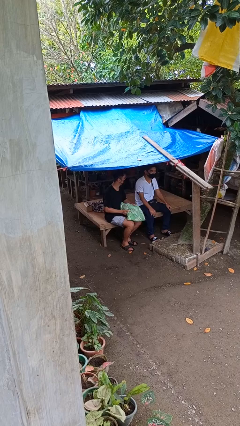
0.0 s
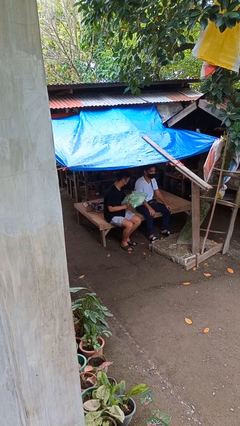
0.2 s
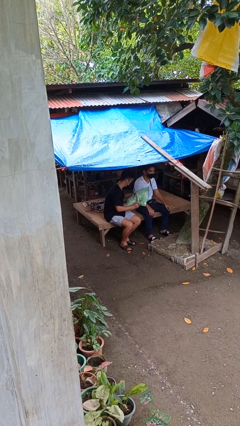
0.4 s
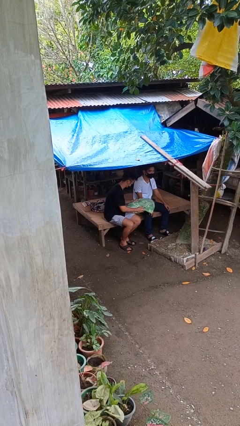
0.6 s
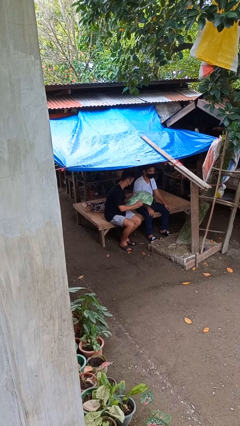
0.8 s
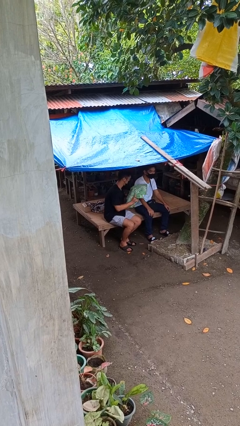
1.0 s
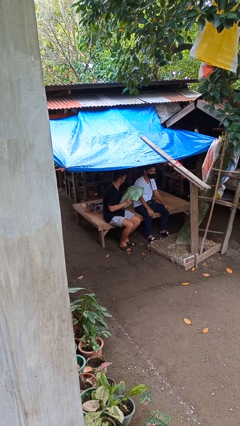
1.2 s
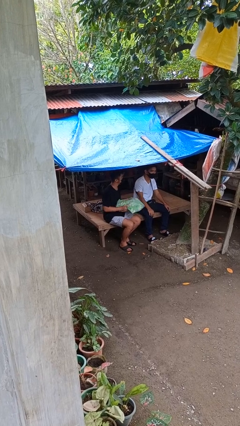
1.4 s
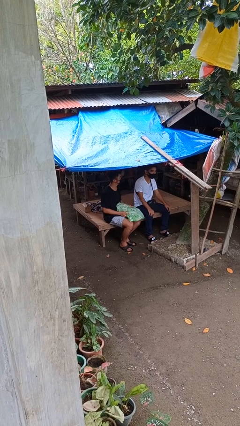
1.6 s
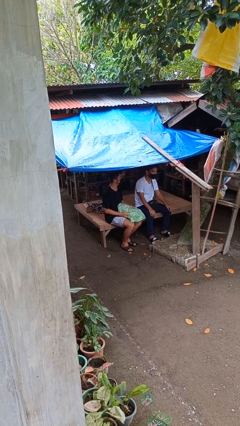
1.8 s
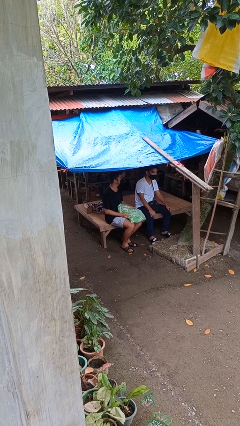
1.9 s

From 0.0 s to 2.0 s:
person hits person with pillow

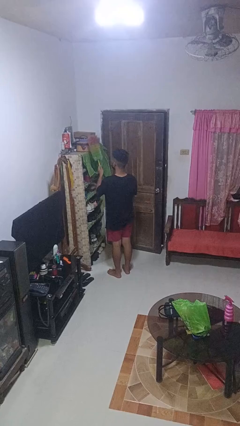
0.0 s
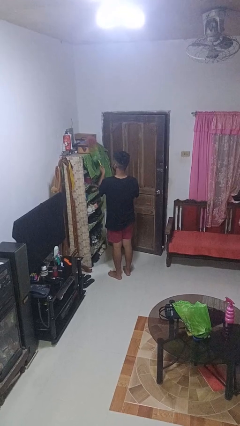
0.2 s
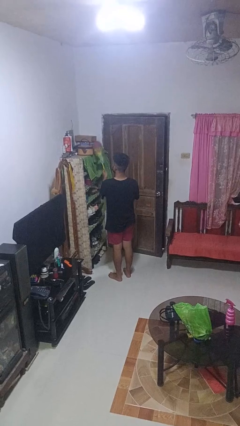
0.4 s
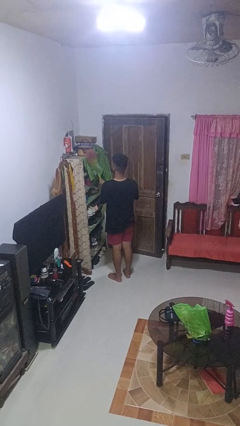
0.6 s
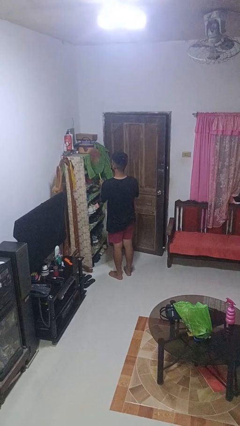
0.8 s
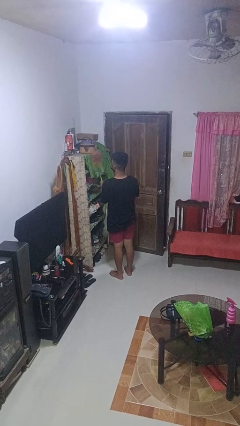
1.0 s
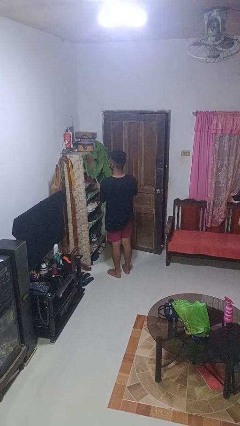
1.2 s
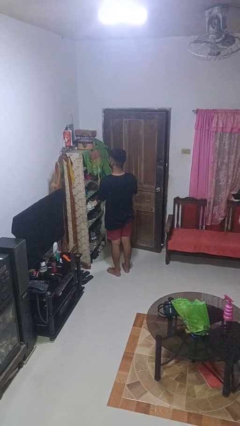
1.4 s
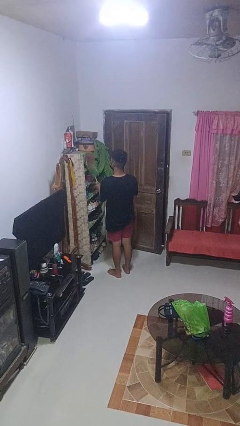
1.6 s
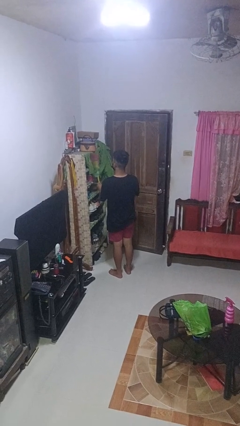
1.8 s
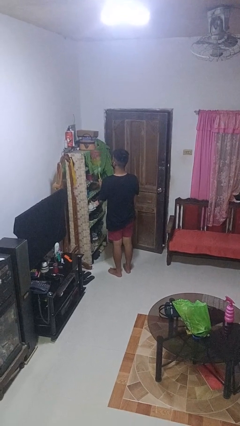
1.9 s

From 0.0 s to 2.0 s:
person dusts furniture

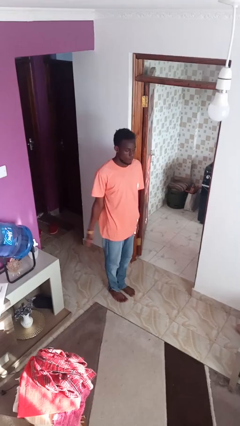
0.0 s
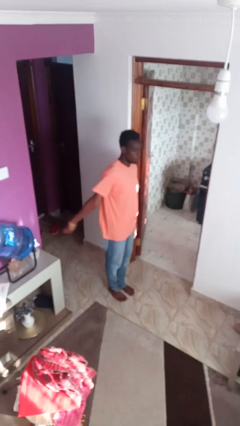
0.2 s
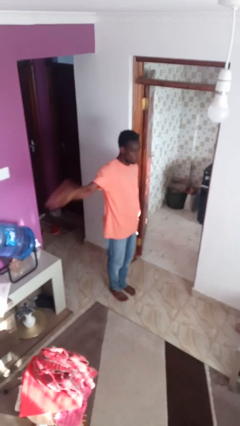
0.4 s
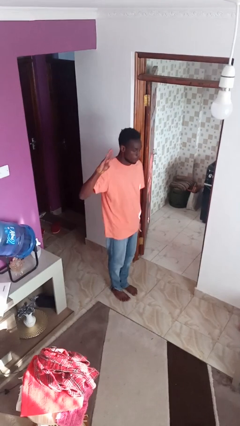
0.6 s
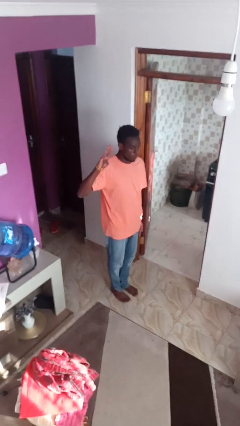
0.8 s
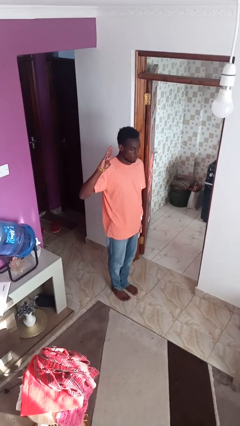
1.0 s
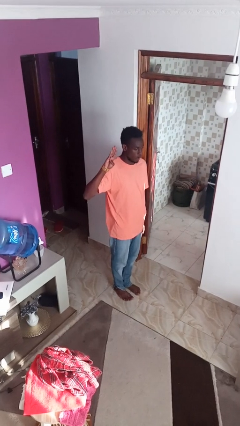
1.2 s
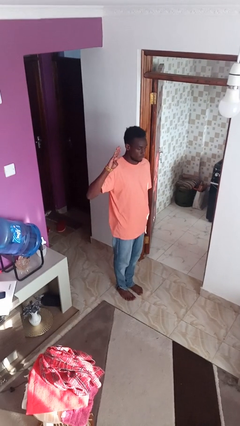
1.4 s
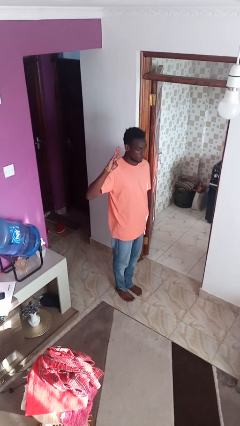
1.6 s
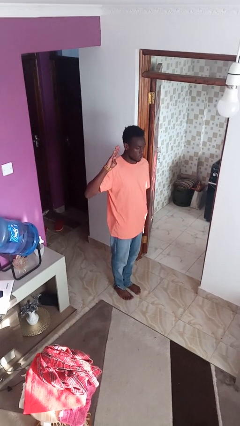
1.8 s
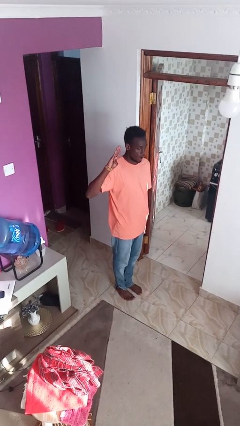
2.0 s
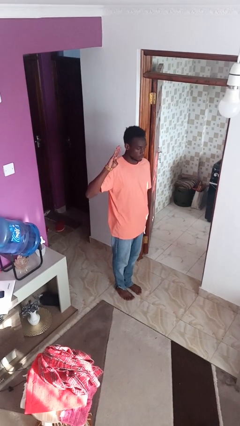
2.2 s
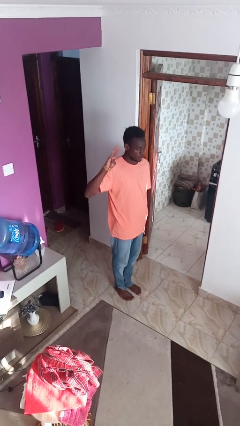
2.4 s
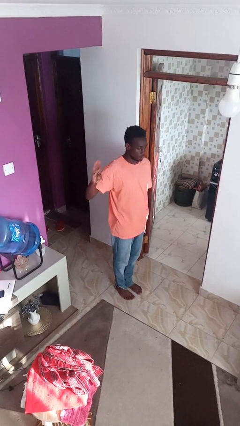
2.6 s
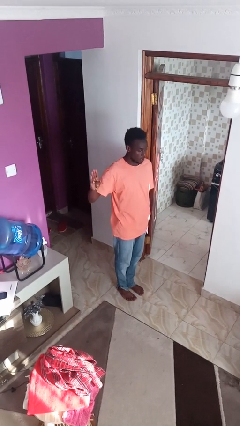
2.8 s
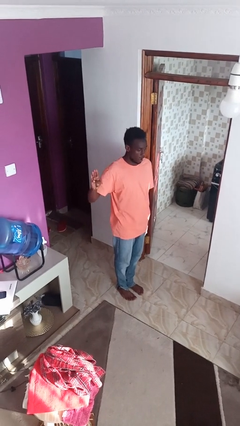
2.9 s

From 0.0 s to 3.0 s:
person salutes

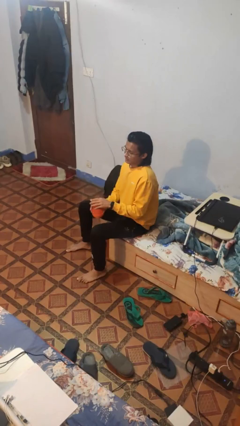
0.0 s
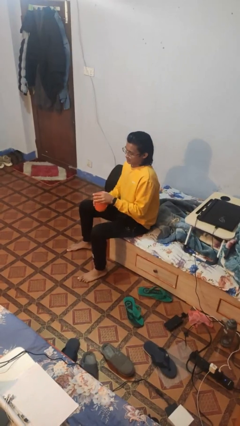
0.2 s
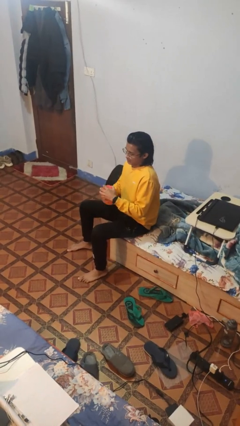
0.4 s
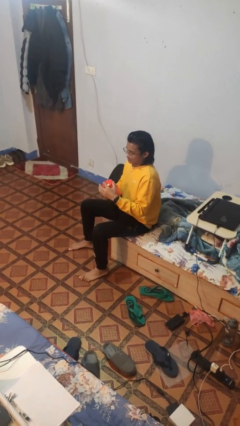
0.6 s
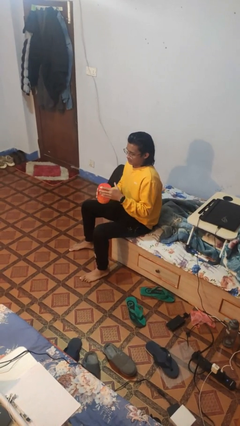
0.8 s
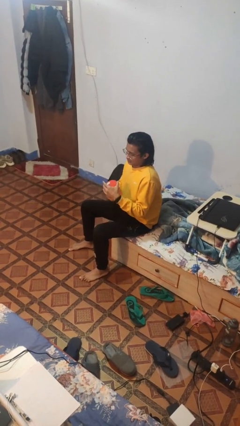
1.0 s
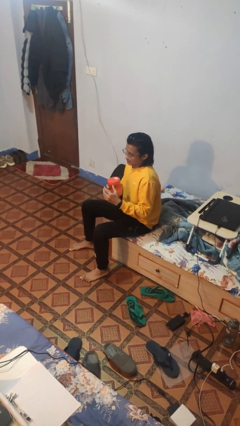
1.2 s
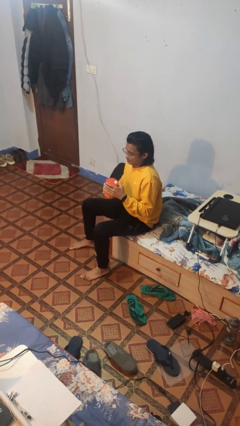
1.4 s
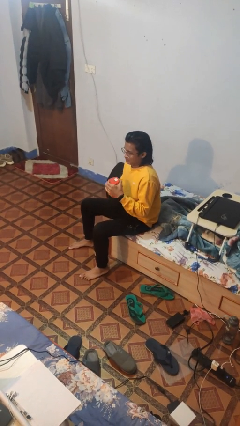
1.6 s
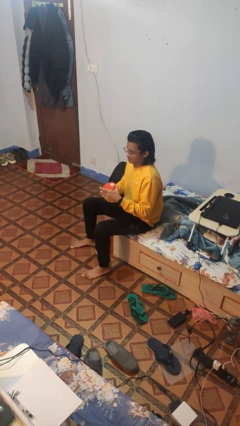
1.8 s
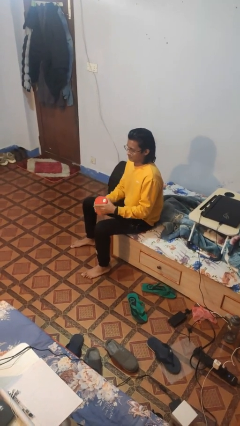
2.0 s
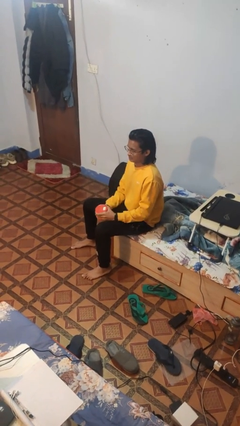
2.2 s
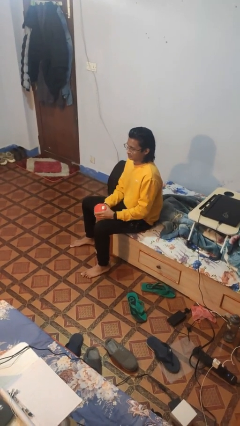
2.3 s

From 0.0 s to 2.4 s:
person closes jar

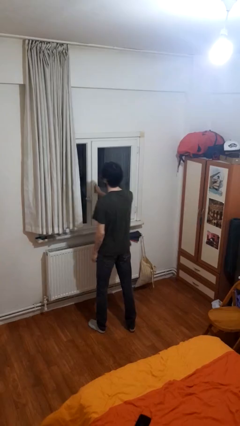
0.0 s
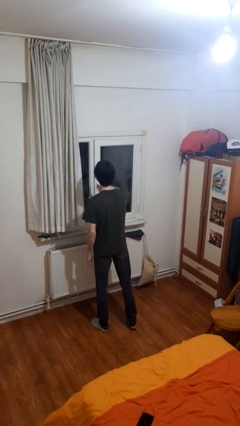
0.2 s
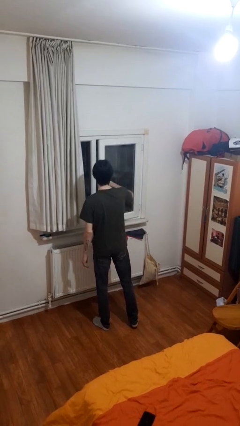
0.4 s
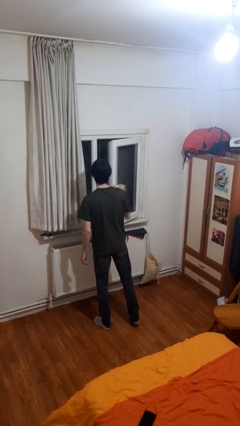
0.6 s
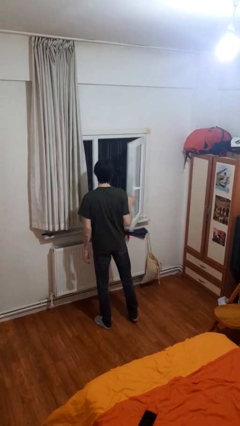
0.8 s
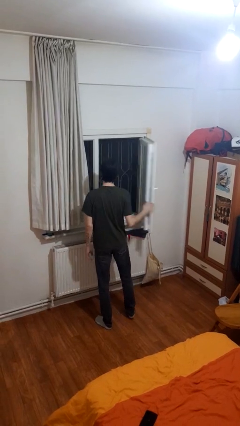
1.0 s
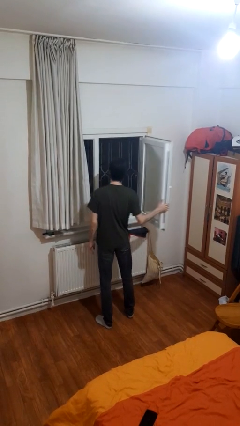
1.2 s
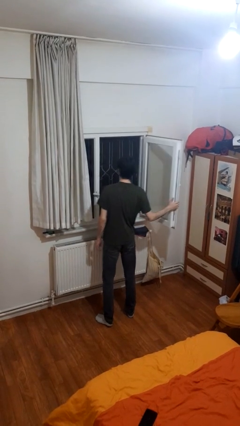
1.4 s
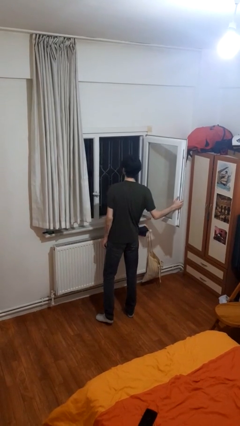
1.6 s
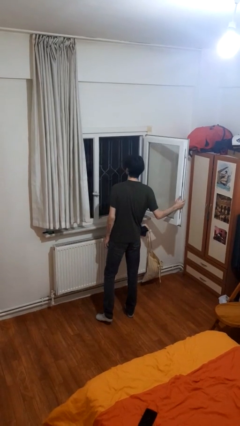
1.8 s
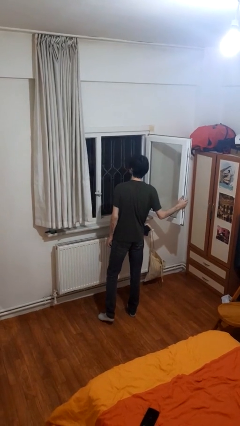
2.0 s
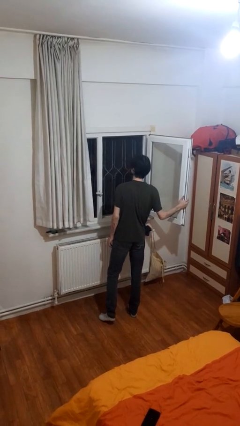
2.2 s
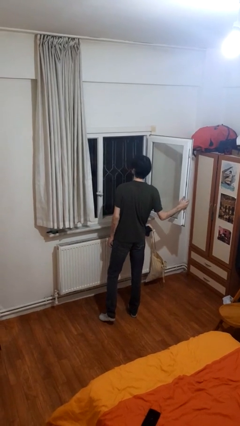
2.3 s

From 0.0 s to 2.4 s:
person opens home window

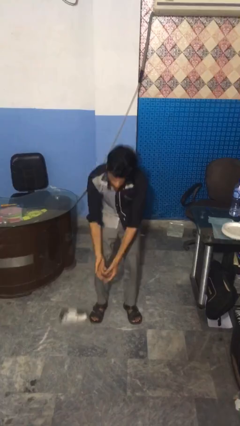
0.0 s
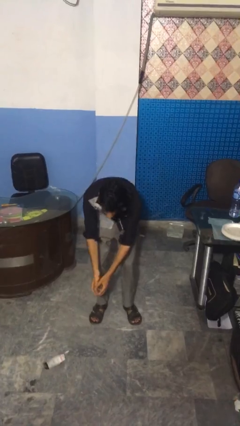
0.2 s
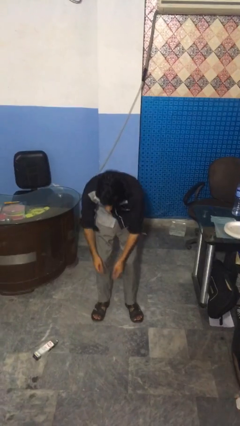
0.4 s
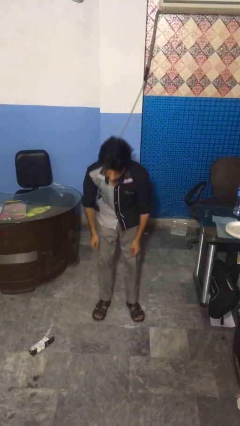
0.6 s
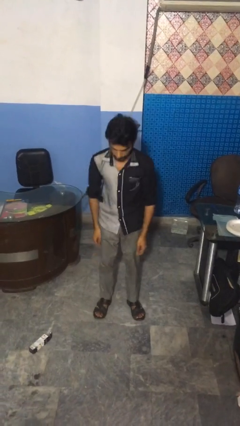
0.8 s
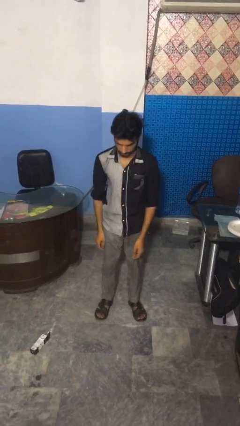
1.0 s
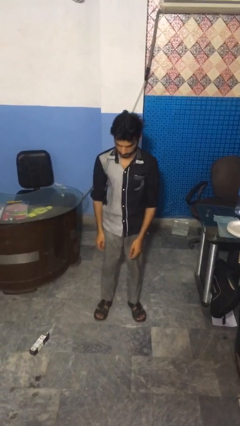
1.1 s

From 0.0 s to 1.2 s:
person catches dropped object

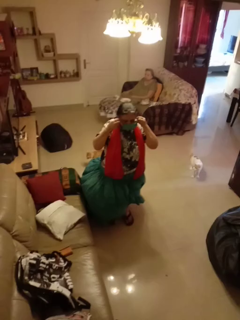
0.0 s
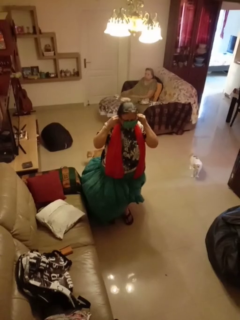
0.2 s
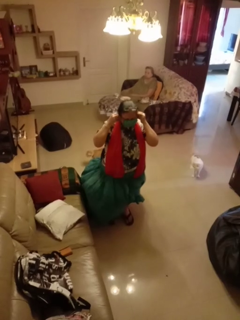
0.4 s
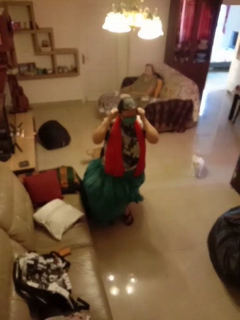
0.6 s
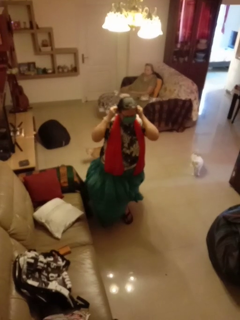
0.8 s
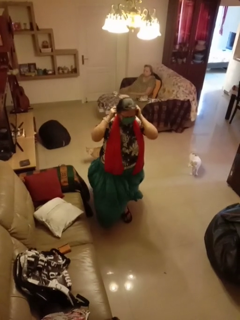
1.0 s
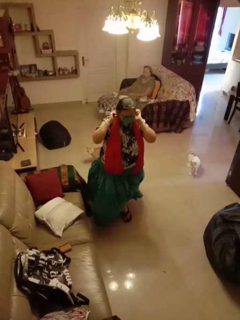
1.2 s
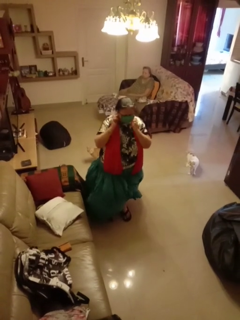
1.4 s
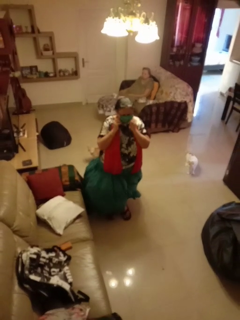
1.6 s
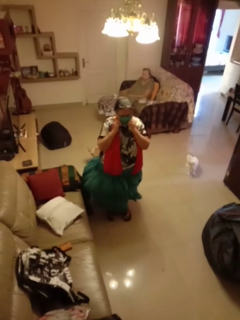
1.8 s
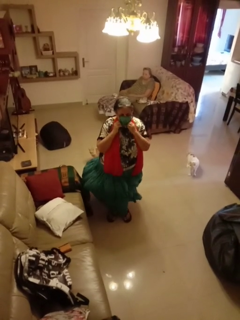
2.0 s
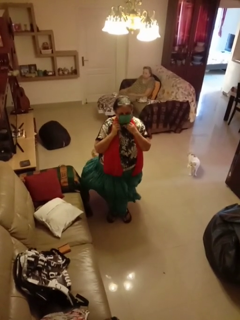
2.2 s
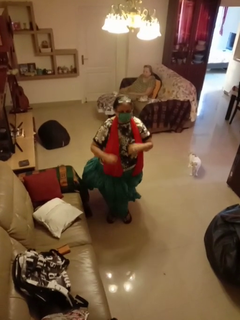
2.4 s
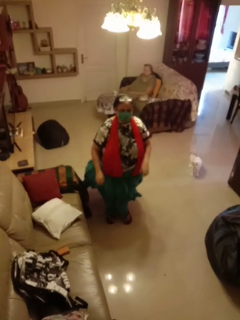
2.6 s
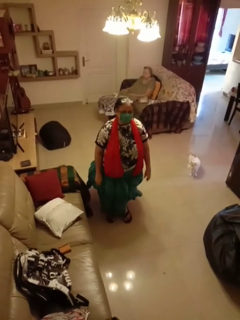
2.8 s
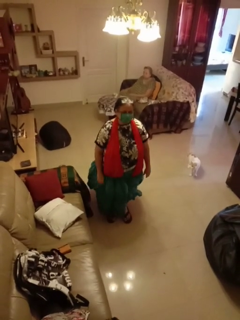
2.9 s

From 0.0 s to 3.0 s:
person puts on facemask

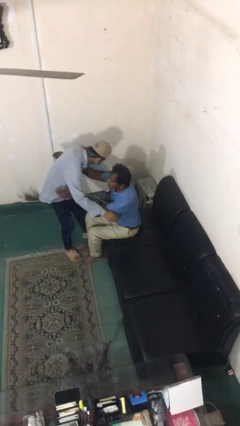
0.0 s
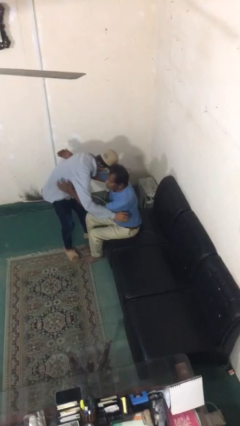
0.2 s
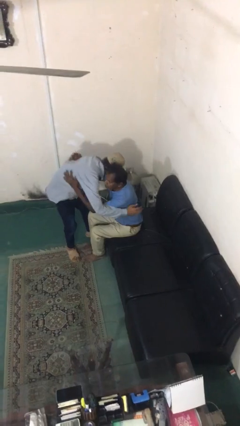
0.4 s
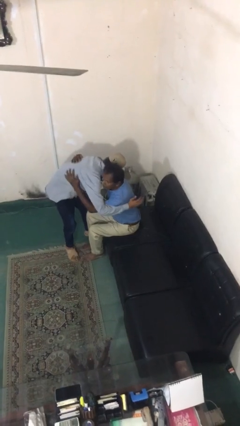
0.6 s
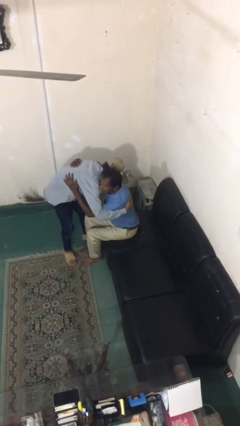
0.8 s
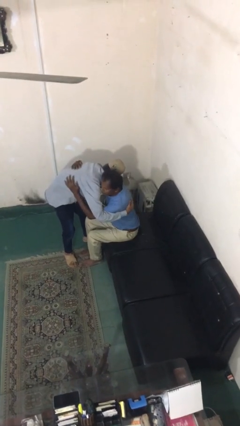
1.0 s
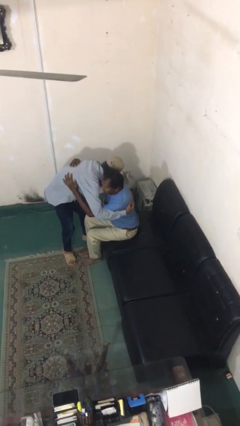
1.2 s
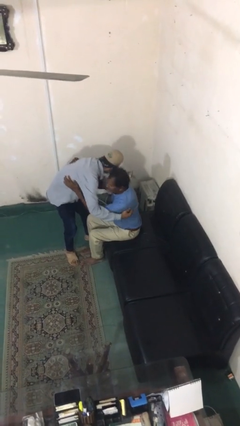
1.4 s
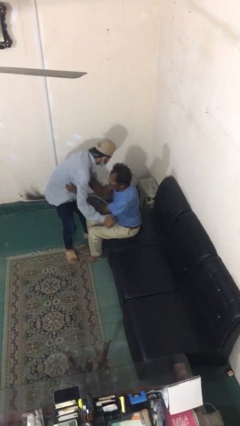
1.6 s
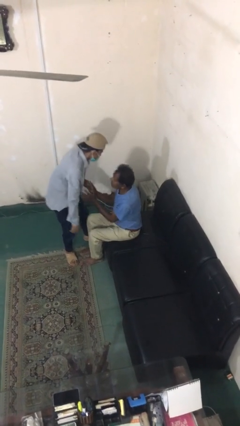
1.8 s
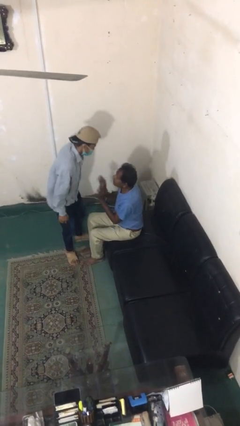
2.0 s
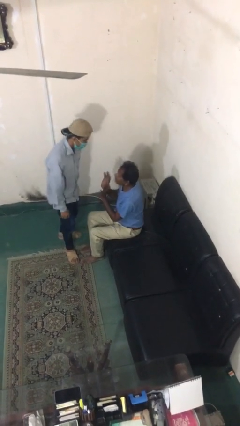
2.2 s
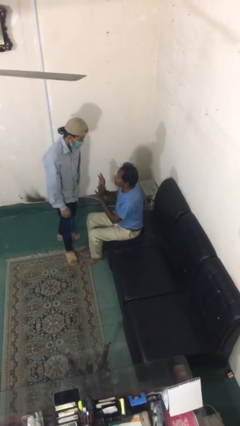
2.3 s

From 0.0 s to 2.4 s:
person embraces person
